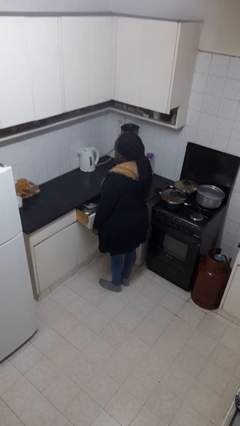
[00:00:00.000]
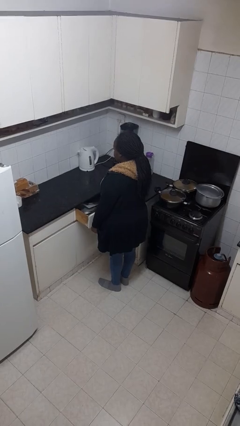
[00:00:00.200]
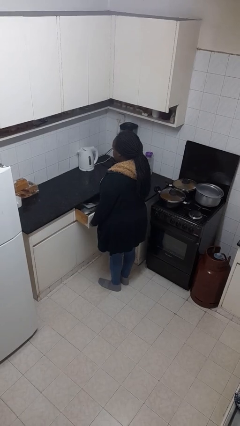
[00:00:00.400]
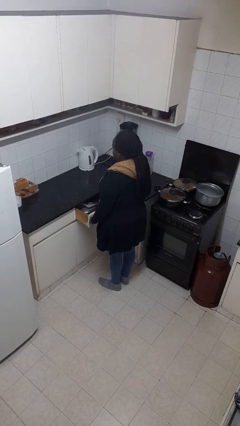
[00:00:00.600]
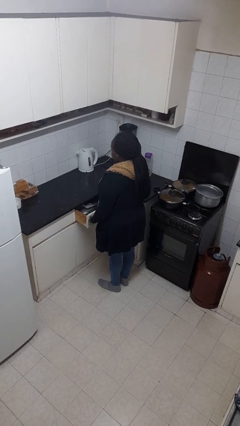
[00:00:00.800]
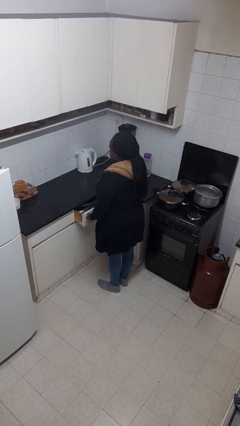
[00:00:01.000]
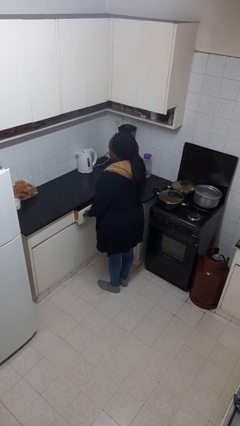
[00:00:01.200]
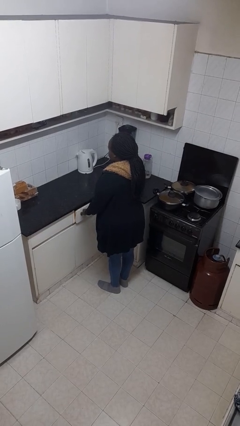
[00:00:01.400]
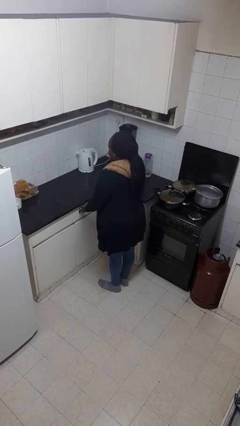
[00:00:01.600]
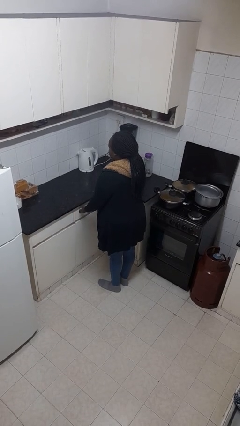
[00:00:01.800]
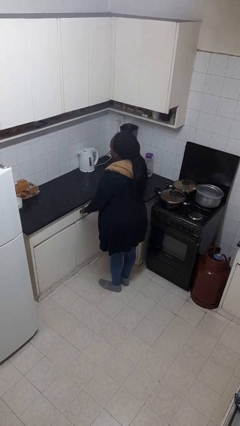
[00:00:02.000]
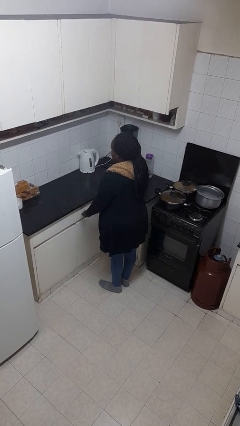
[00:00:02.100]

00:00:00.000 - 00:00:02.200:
person closes kitchen drawer

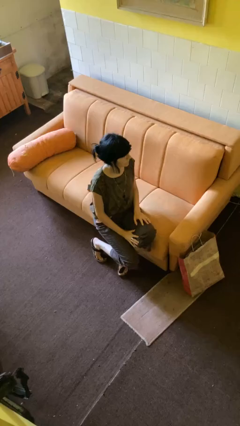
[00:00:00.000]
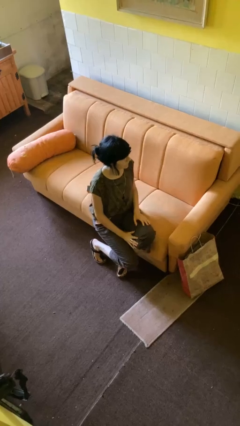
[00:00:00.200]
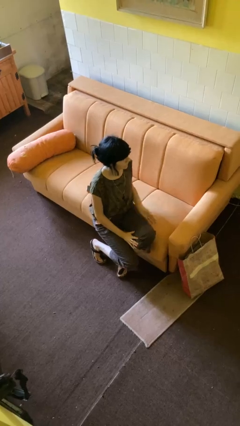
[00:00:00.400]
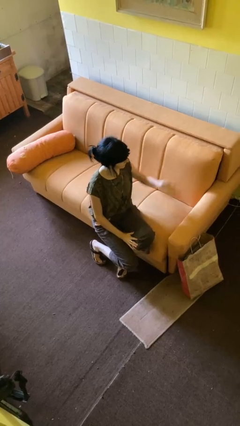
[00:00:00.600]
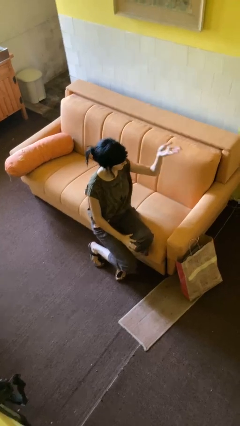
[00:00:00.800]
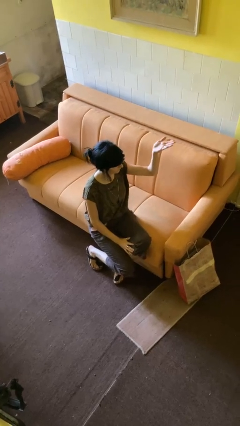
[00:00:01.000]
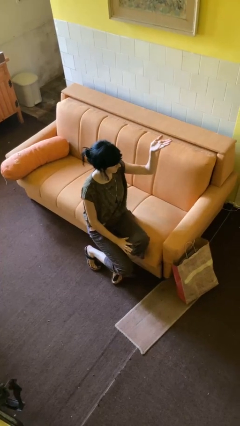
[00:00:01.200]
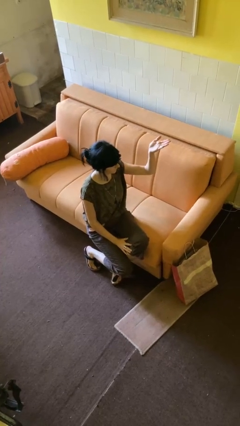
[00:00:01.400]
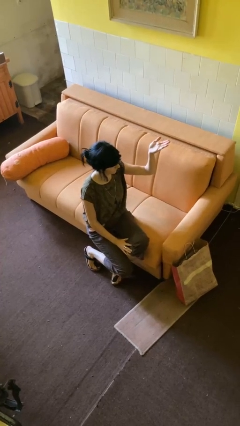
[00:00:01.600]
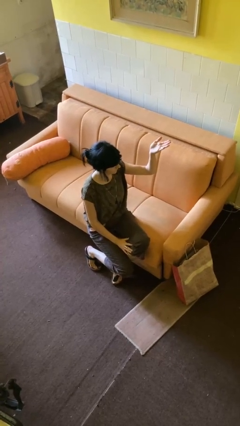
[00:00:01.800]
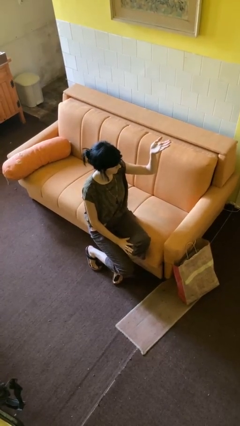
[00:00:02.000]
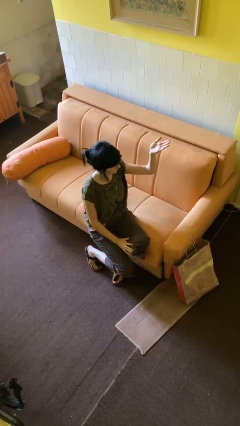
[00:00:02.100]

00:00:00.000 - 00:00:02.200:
person gestures swipe up

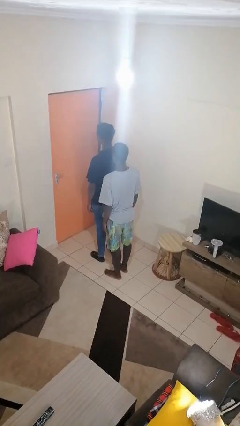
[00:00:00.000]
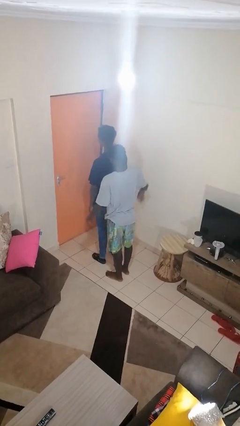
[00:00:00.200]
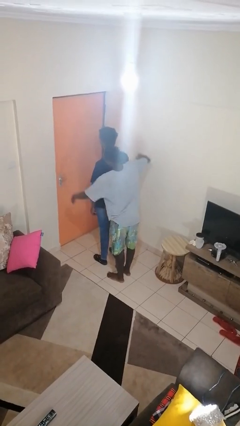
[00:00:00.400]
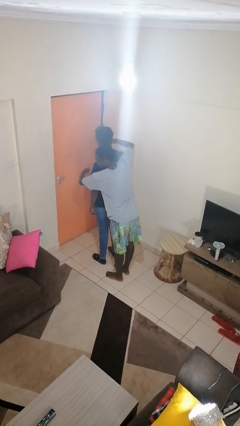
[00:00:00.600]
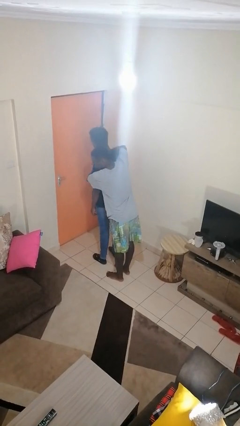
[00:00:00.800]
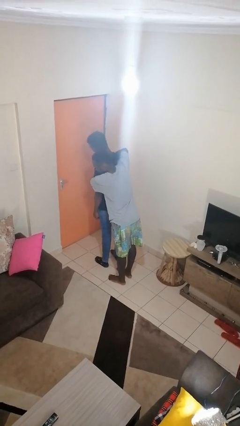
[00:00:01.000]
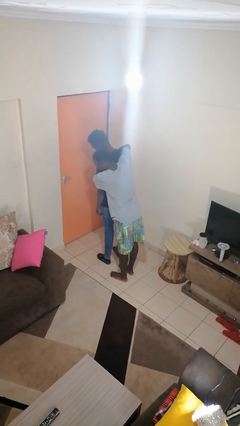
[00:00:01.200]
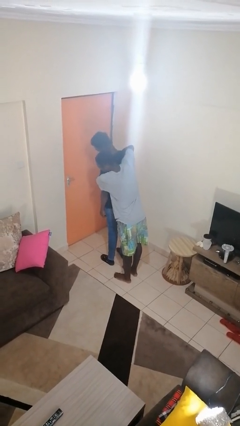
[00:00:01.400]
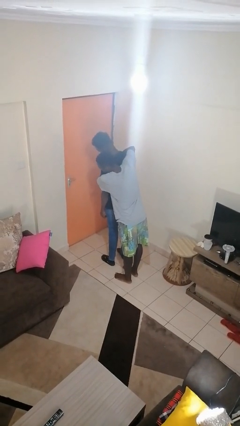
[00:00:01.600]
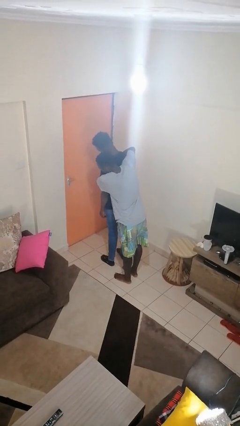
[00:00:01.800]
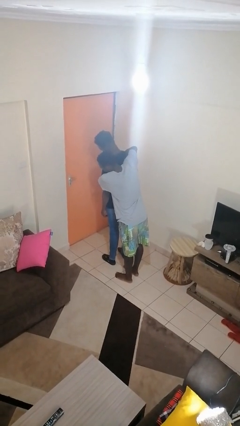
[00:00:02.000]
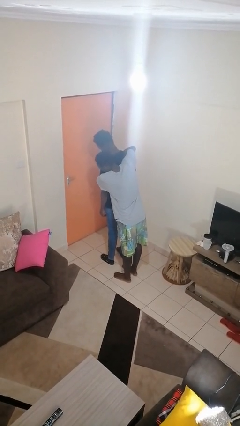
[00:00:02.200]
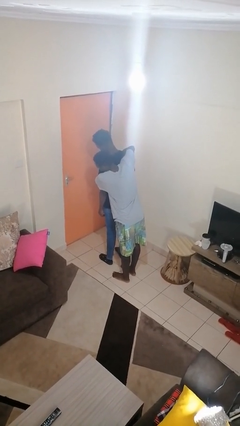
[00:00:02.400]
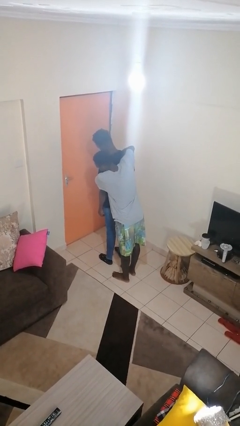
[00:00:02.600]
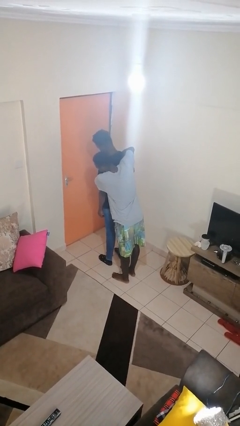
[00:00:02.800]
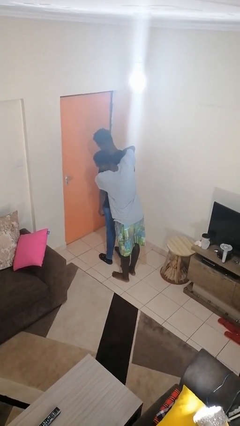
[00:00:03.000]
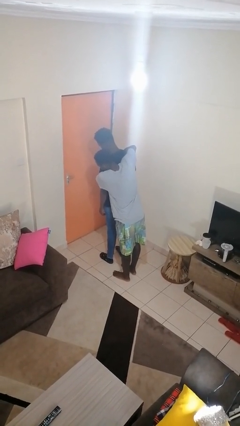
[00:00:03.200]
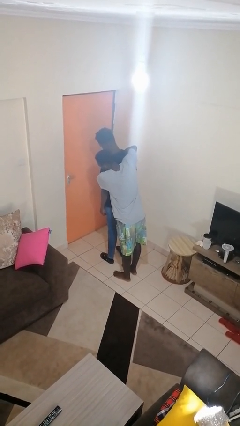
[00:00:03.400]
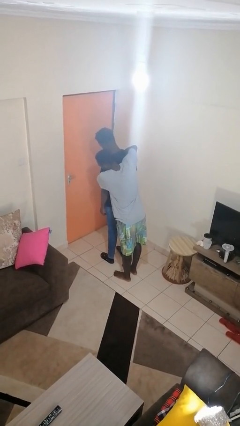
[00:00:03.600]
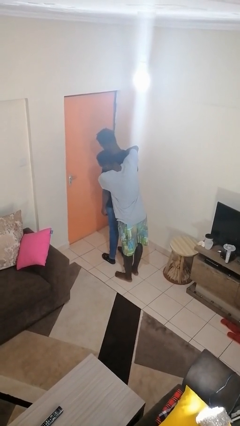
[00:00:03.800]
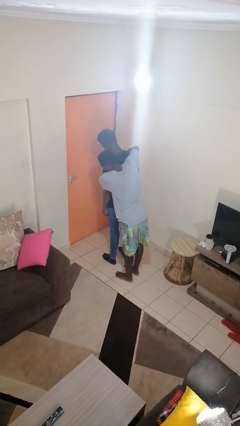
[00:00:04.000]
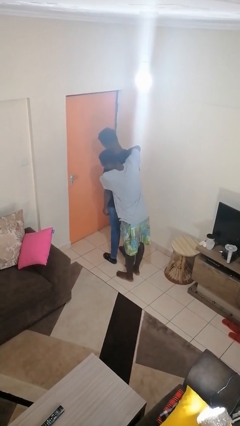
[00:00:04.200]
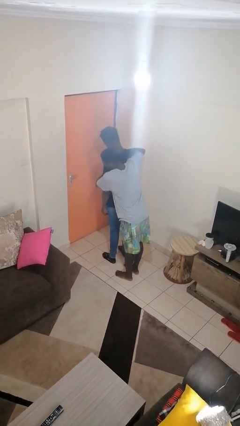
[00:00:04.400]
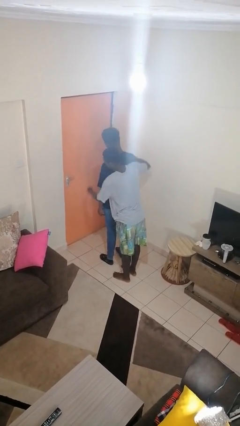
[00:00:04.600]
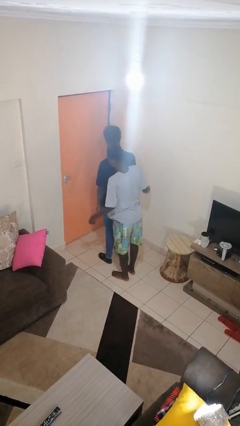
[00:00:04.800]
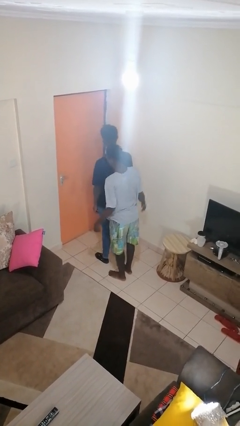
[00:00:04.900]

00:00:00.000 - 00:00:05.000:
person hugs person from behind

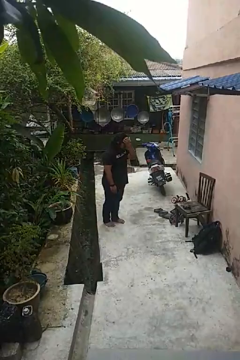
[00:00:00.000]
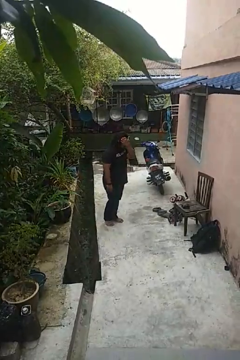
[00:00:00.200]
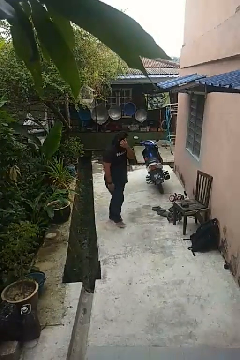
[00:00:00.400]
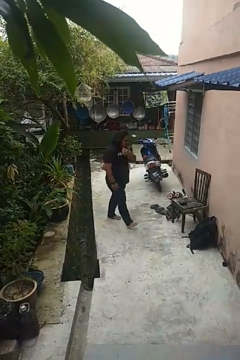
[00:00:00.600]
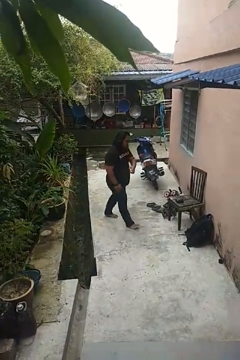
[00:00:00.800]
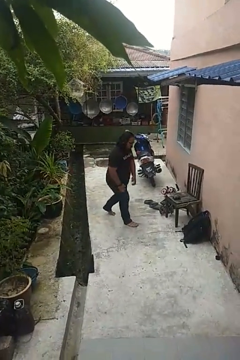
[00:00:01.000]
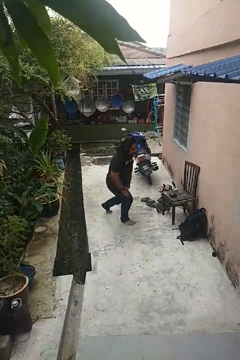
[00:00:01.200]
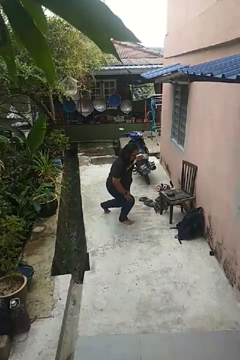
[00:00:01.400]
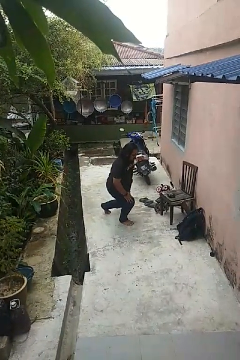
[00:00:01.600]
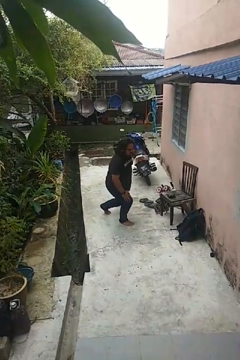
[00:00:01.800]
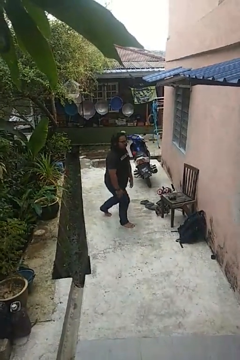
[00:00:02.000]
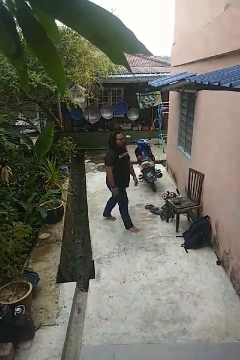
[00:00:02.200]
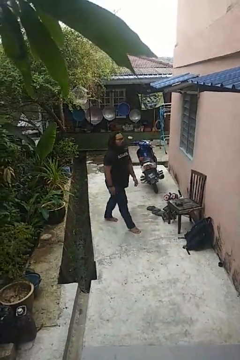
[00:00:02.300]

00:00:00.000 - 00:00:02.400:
person exercises with lunges

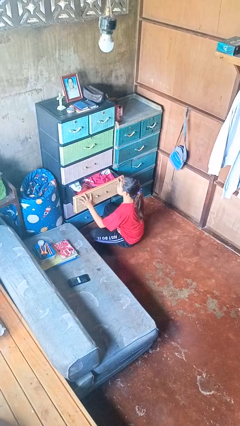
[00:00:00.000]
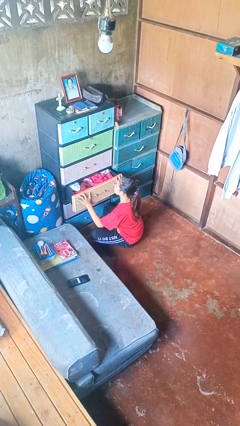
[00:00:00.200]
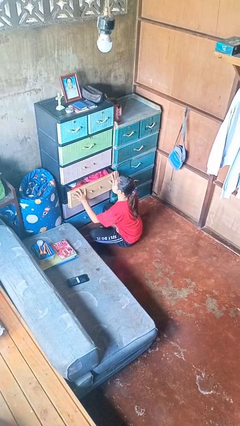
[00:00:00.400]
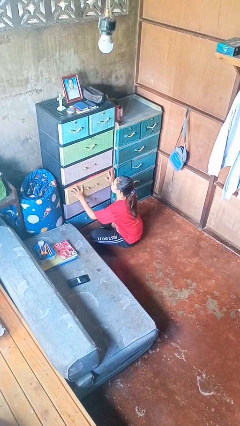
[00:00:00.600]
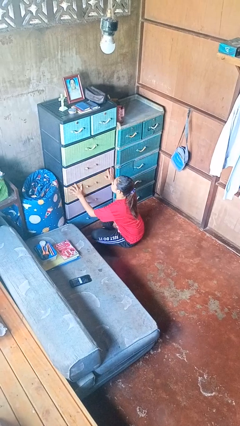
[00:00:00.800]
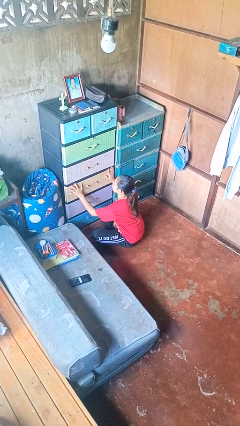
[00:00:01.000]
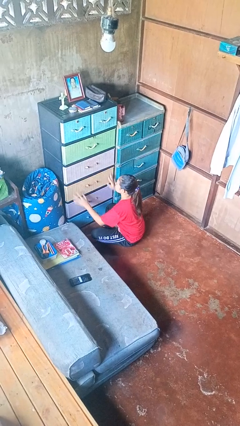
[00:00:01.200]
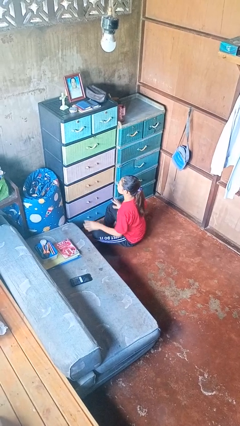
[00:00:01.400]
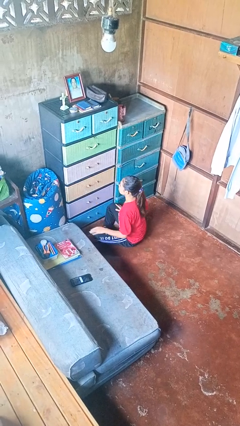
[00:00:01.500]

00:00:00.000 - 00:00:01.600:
person closes dresser drawer

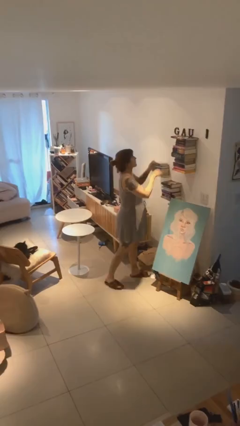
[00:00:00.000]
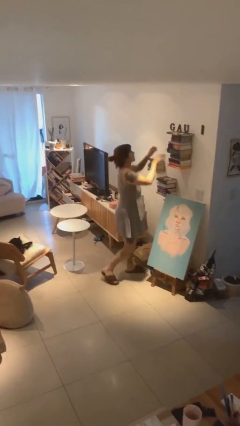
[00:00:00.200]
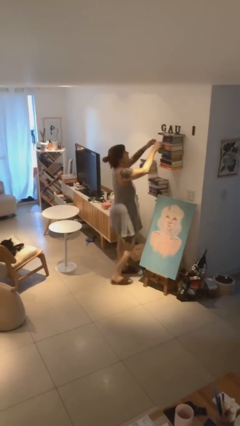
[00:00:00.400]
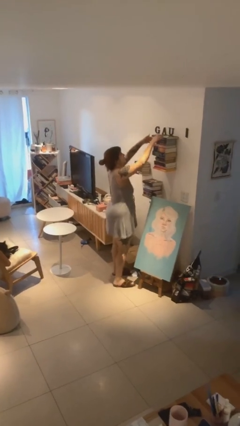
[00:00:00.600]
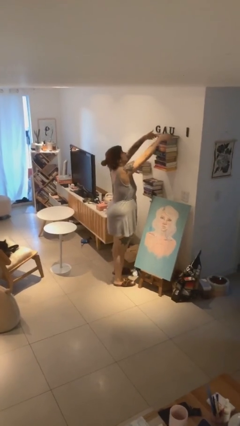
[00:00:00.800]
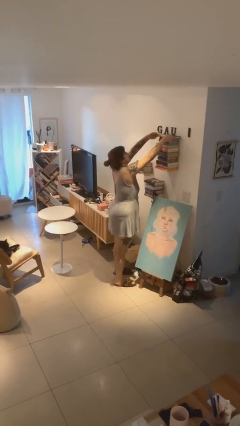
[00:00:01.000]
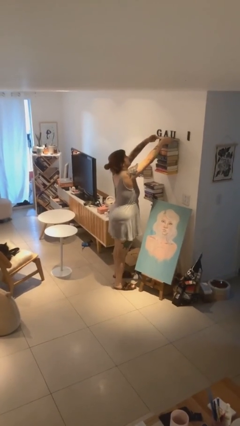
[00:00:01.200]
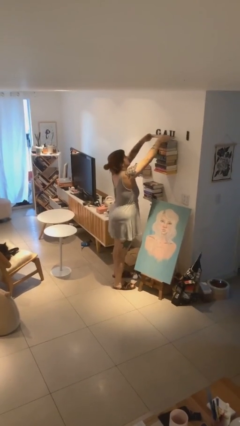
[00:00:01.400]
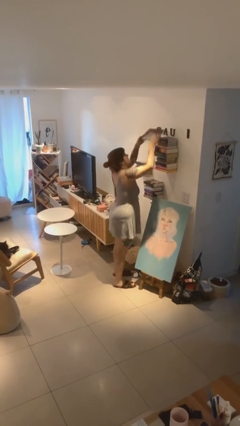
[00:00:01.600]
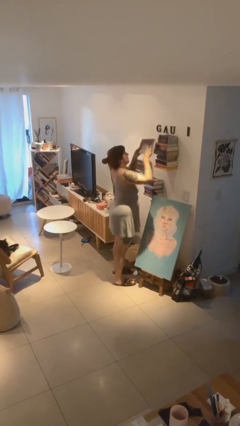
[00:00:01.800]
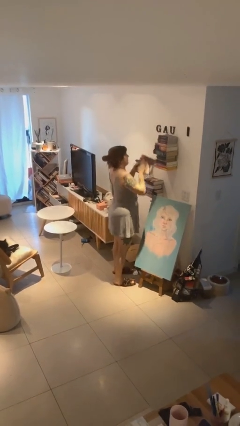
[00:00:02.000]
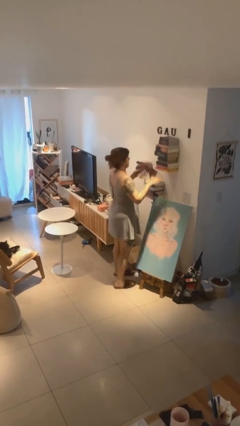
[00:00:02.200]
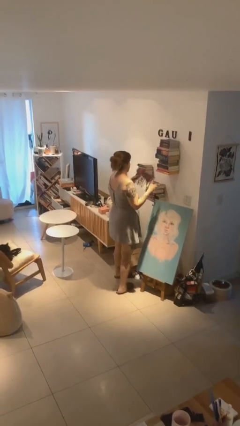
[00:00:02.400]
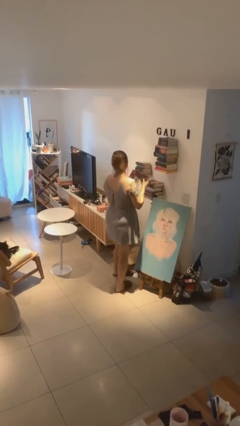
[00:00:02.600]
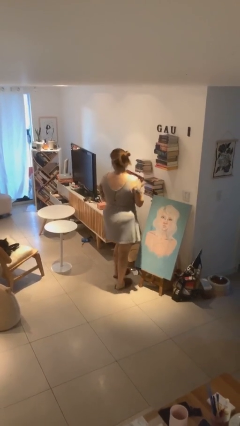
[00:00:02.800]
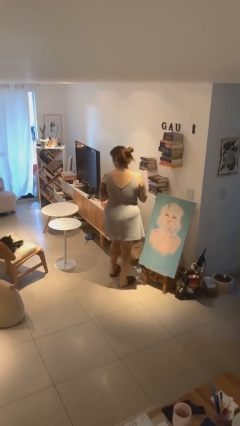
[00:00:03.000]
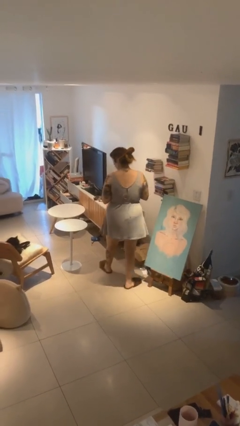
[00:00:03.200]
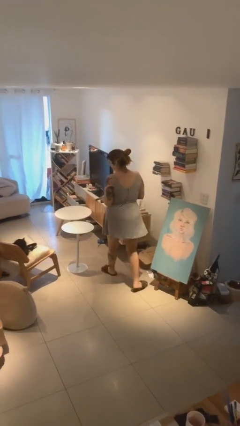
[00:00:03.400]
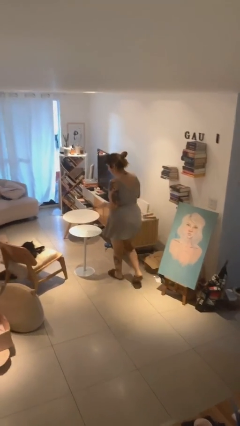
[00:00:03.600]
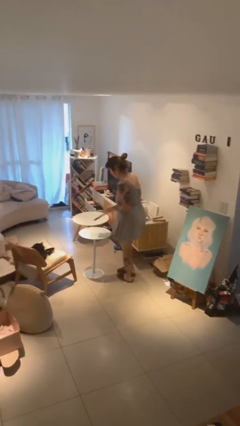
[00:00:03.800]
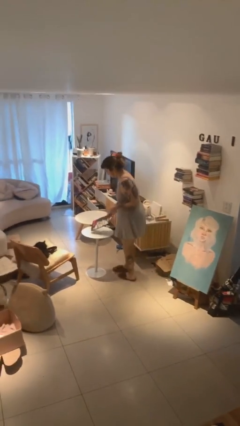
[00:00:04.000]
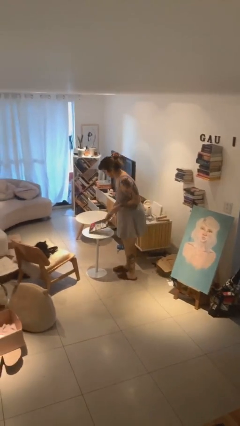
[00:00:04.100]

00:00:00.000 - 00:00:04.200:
person picks up object from shelf
